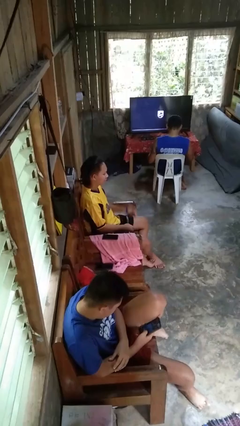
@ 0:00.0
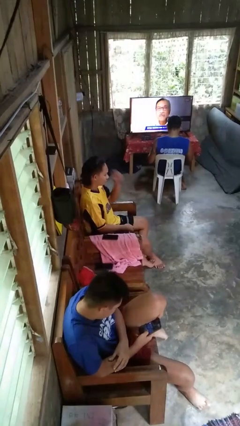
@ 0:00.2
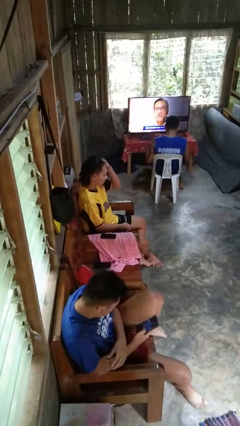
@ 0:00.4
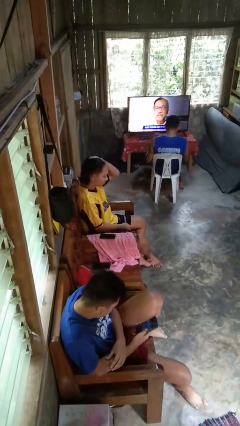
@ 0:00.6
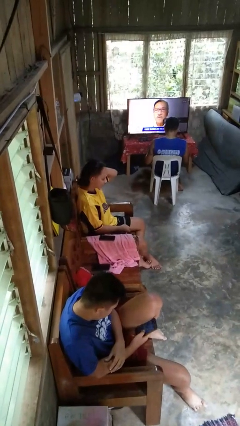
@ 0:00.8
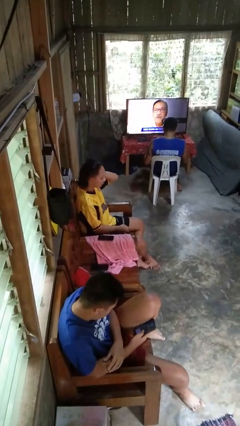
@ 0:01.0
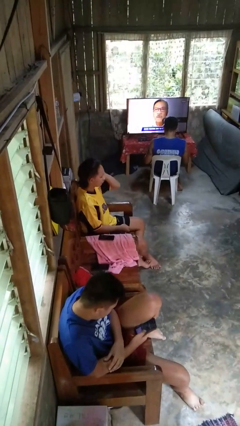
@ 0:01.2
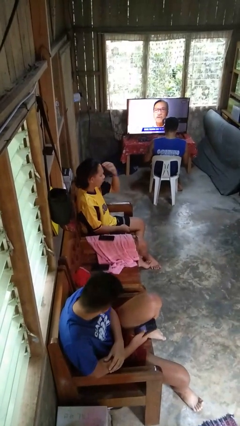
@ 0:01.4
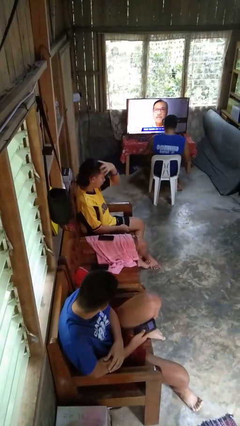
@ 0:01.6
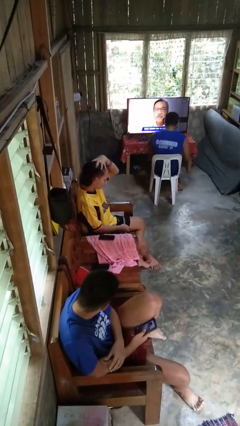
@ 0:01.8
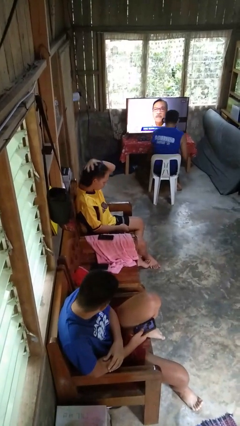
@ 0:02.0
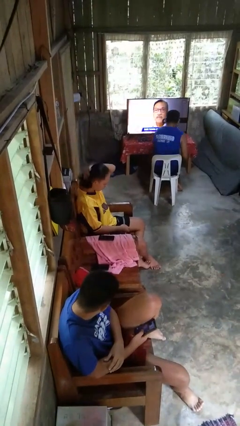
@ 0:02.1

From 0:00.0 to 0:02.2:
person strokes hair

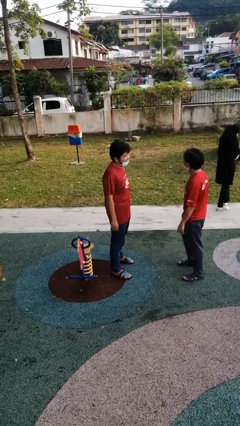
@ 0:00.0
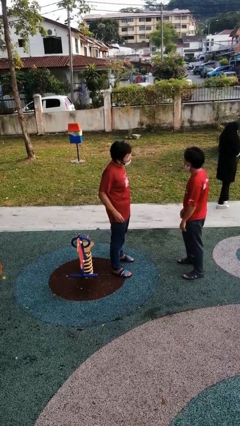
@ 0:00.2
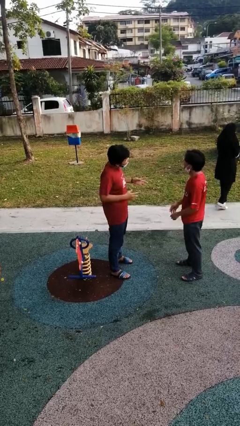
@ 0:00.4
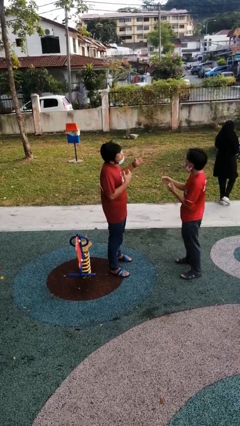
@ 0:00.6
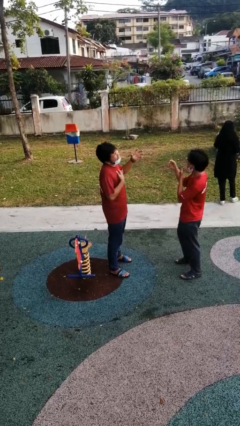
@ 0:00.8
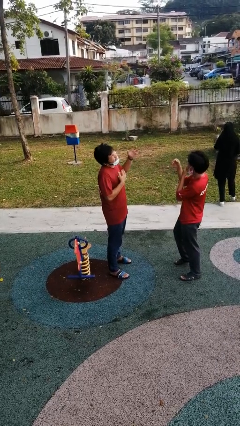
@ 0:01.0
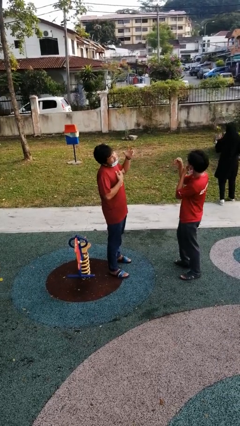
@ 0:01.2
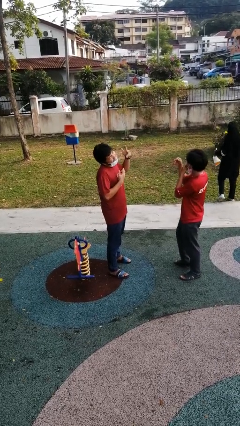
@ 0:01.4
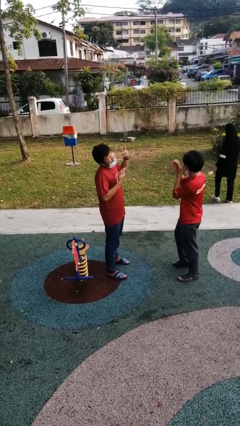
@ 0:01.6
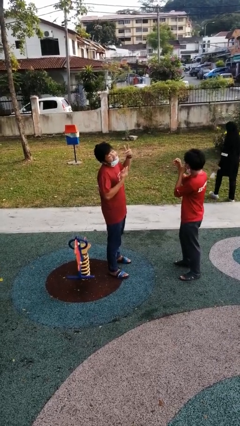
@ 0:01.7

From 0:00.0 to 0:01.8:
person laughs with person

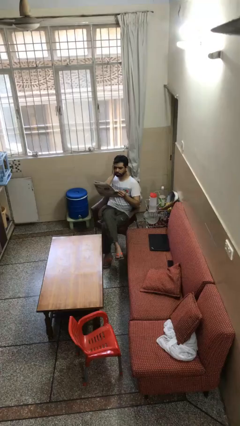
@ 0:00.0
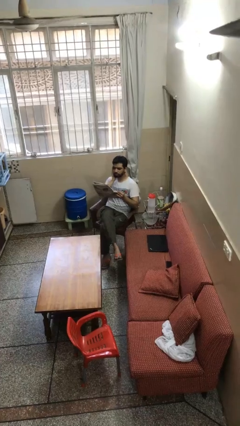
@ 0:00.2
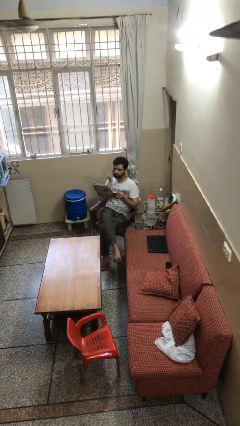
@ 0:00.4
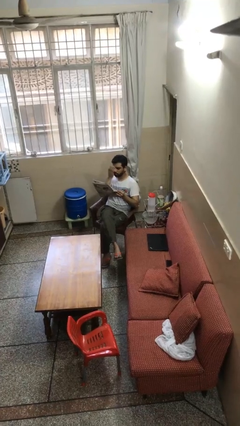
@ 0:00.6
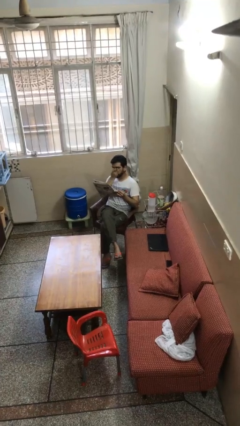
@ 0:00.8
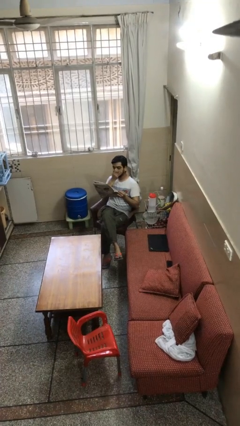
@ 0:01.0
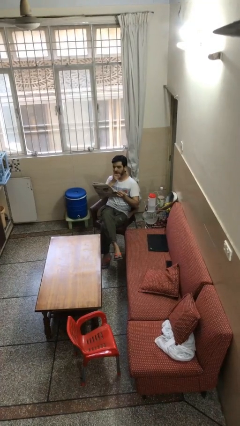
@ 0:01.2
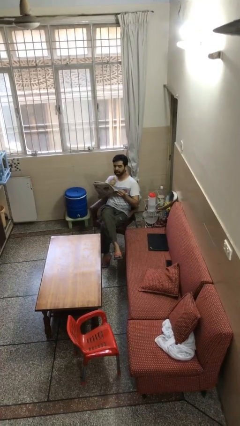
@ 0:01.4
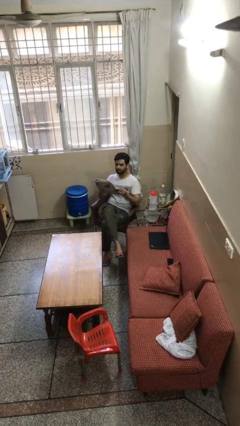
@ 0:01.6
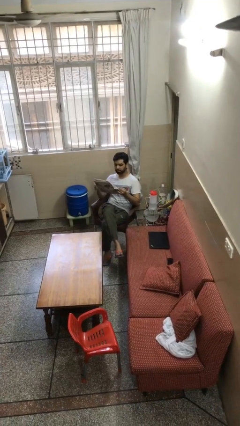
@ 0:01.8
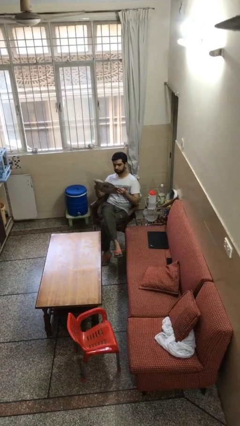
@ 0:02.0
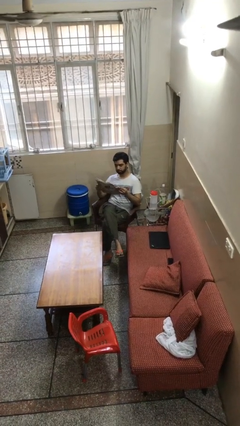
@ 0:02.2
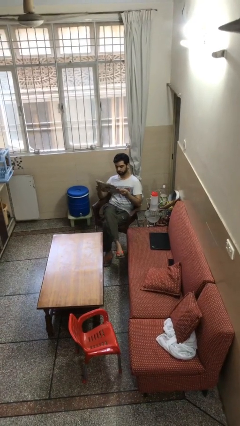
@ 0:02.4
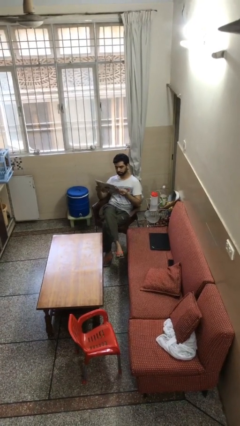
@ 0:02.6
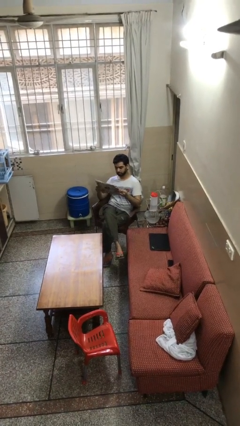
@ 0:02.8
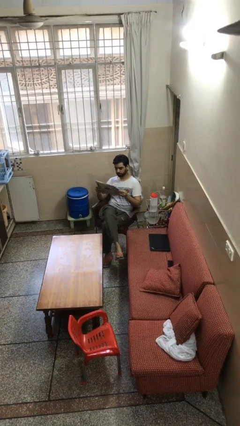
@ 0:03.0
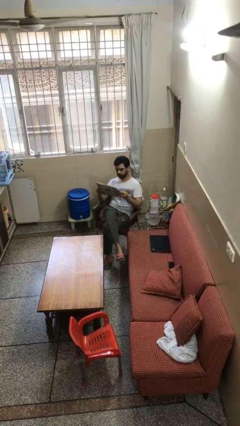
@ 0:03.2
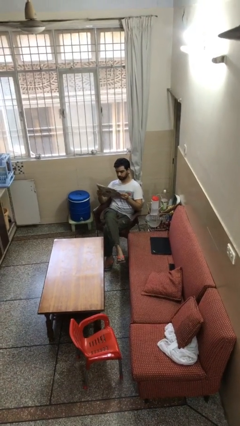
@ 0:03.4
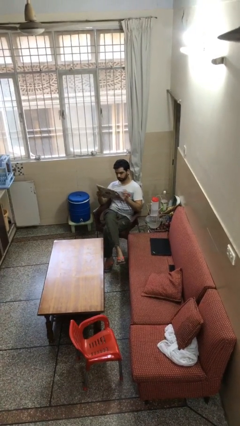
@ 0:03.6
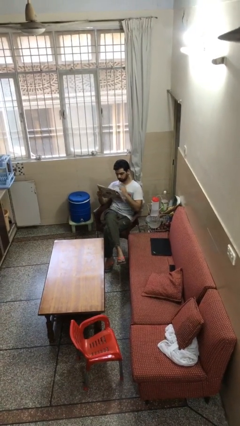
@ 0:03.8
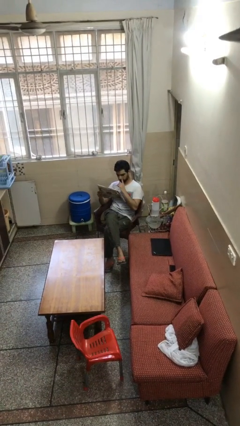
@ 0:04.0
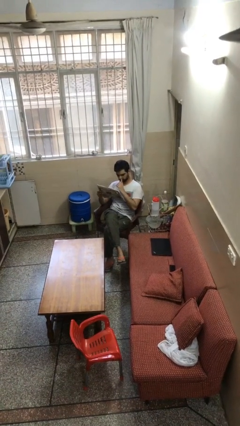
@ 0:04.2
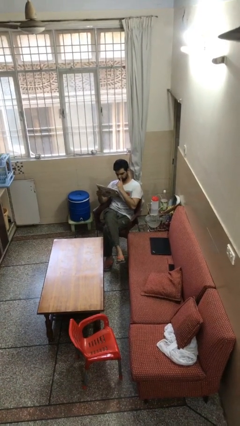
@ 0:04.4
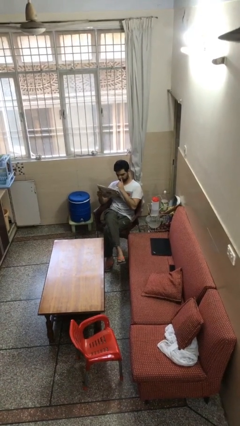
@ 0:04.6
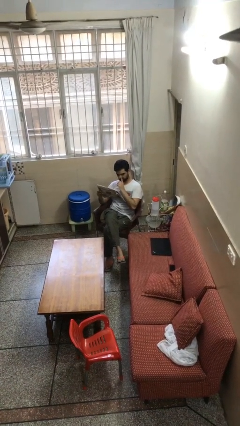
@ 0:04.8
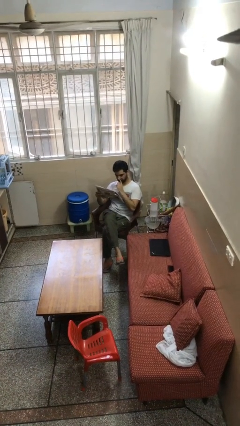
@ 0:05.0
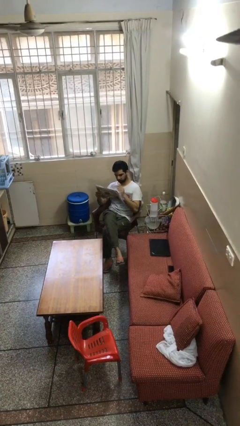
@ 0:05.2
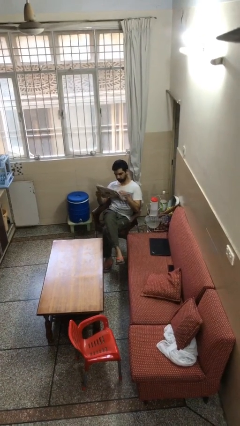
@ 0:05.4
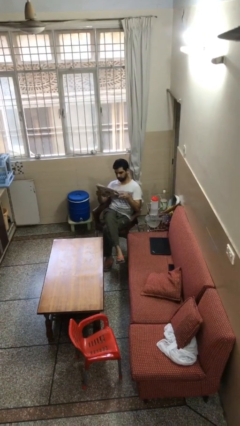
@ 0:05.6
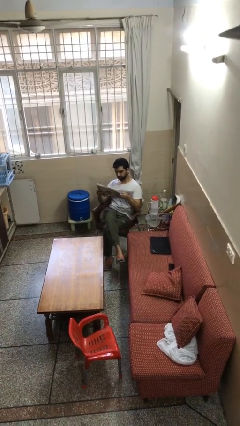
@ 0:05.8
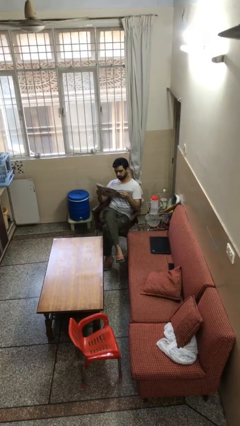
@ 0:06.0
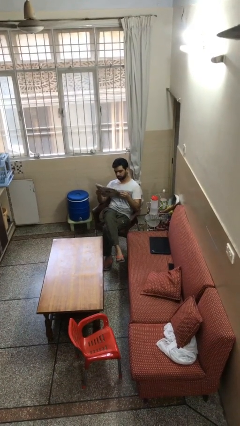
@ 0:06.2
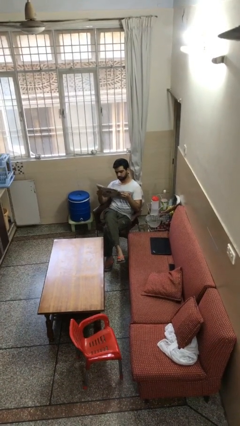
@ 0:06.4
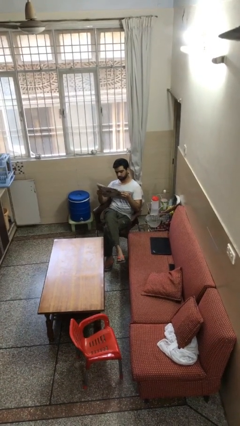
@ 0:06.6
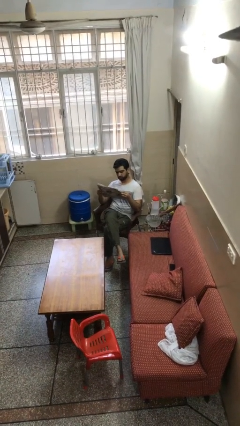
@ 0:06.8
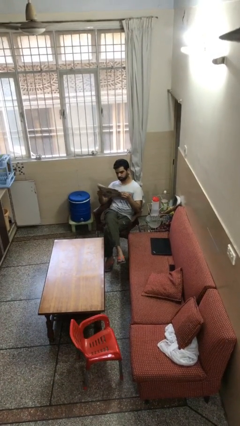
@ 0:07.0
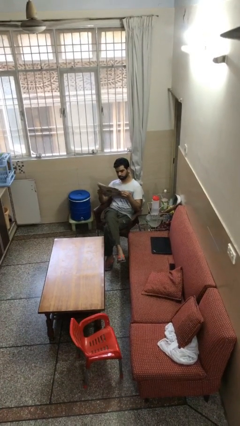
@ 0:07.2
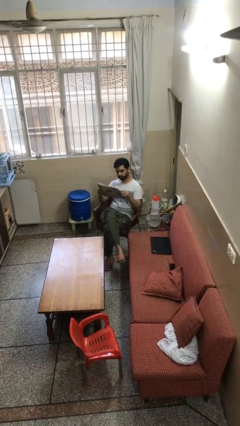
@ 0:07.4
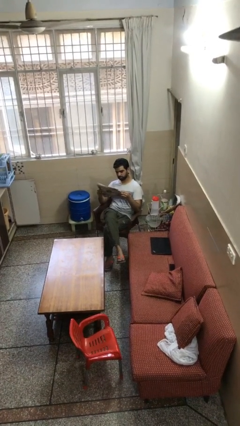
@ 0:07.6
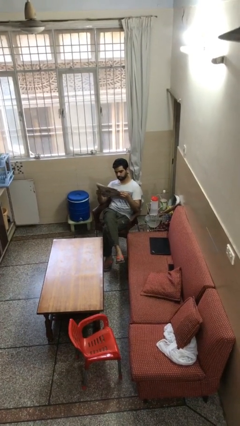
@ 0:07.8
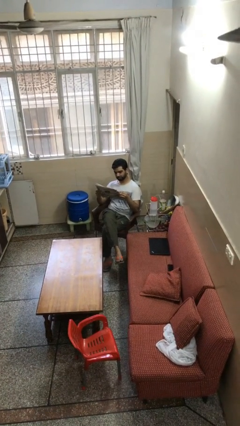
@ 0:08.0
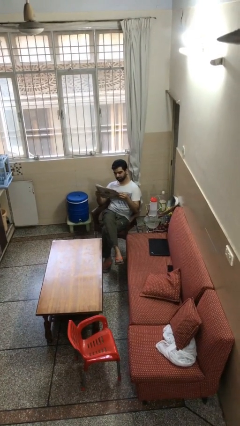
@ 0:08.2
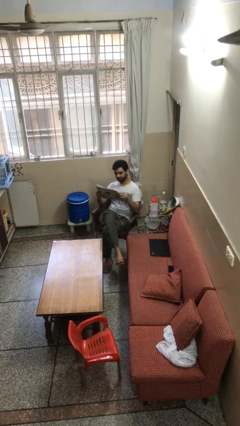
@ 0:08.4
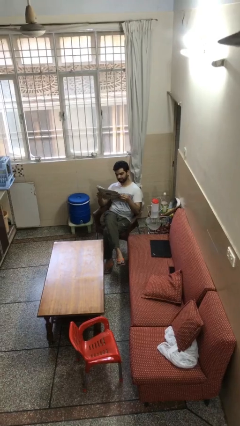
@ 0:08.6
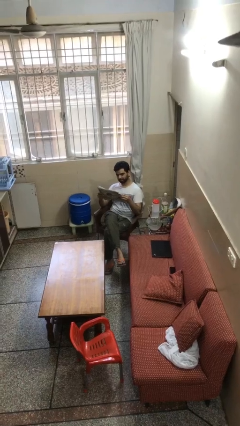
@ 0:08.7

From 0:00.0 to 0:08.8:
person reads document

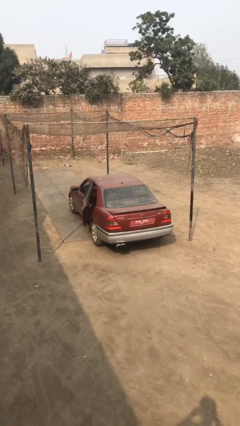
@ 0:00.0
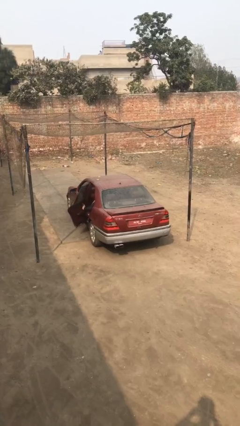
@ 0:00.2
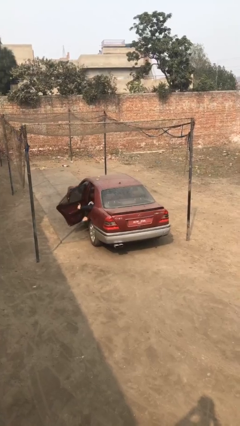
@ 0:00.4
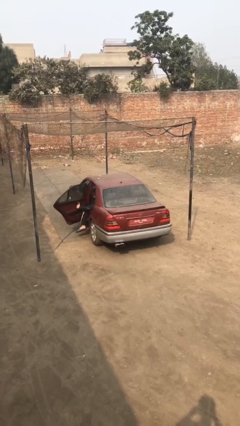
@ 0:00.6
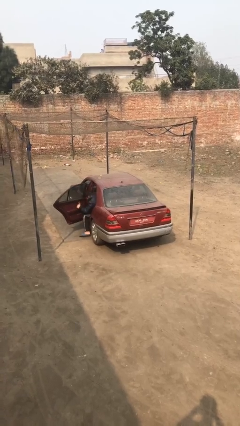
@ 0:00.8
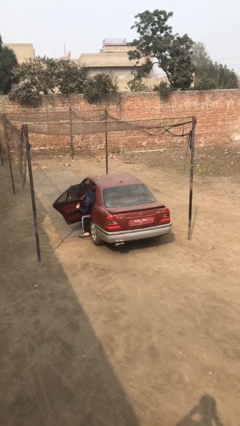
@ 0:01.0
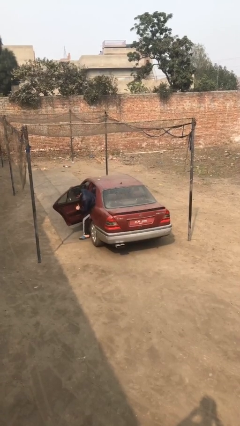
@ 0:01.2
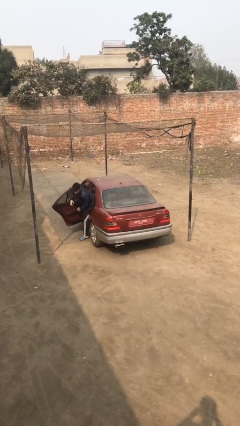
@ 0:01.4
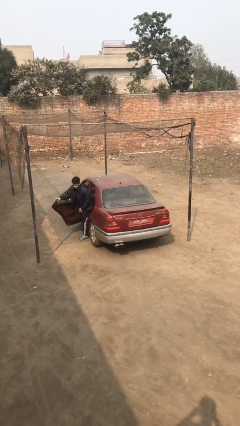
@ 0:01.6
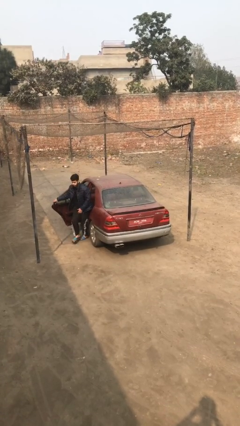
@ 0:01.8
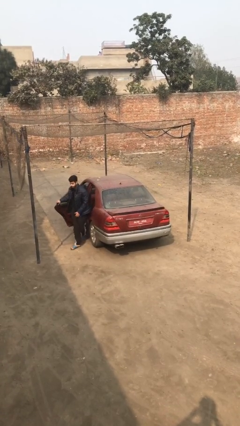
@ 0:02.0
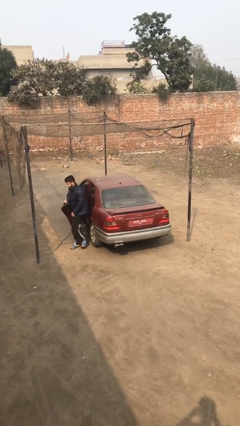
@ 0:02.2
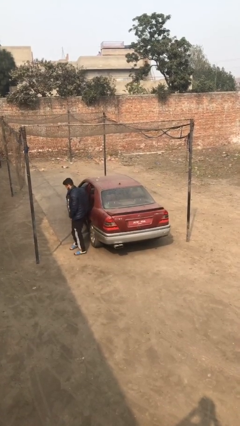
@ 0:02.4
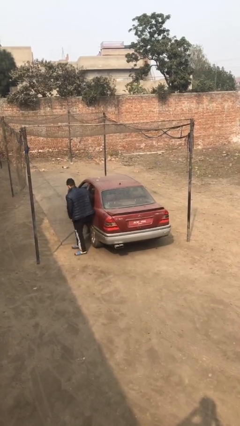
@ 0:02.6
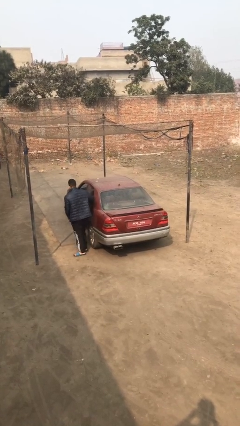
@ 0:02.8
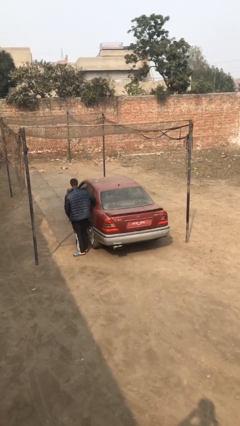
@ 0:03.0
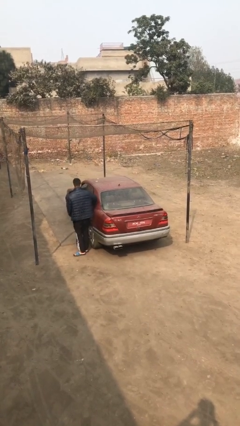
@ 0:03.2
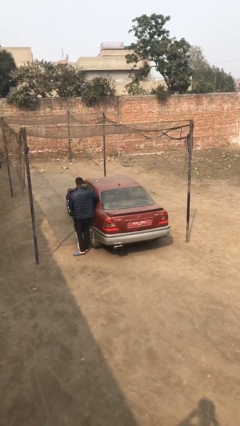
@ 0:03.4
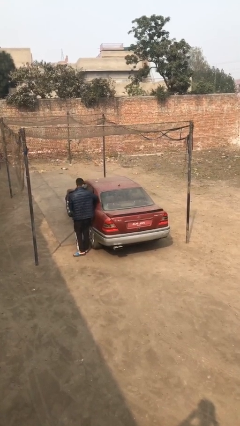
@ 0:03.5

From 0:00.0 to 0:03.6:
car drops off person

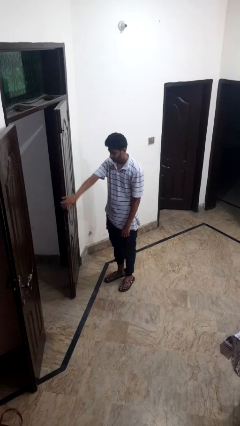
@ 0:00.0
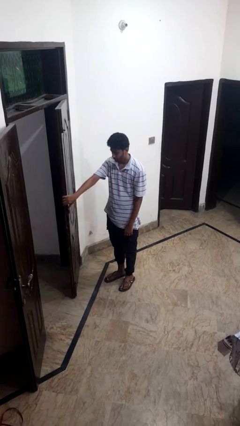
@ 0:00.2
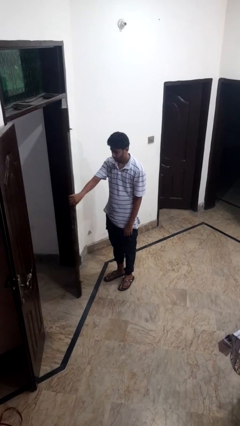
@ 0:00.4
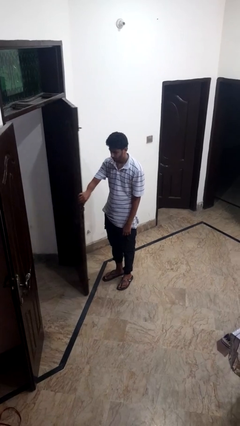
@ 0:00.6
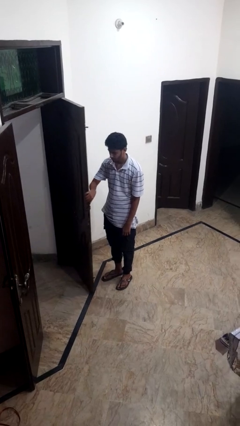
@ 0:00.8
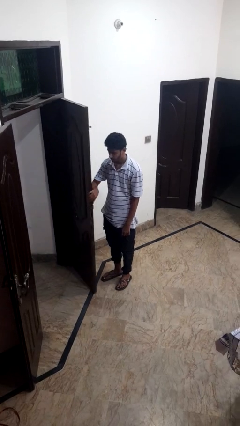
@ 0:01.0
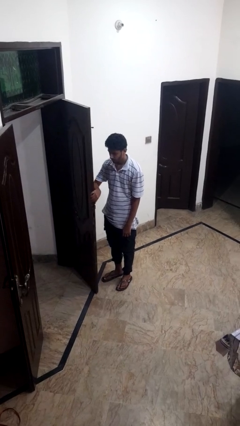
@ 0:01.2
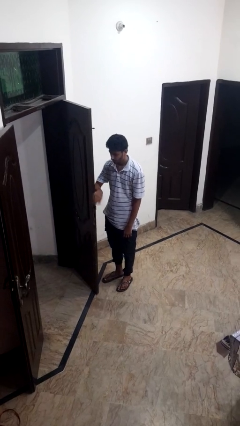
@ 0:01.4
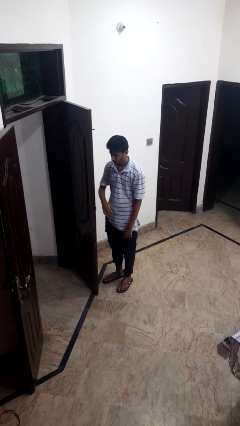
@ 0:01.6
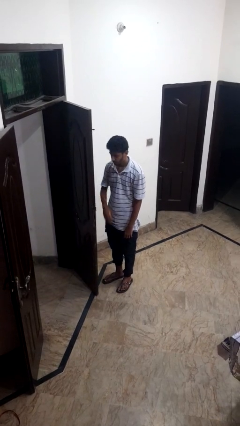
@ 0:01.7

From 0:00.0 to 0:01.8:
person opens facility door
